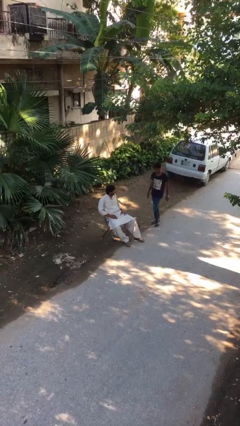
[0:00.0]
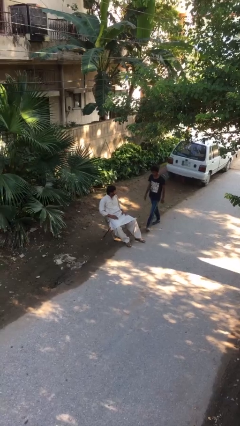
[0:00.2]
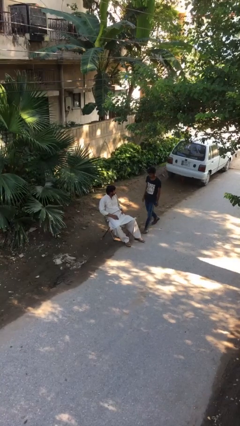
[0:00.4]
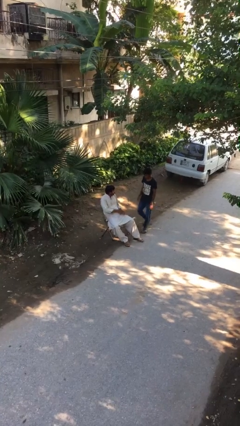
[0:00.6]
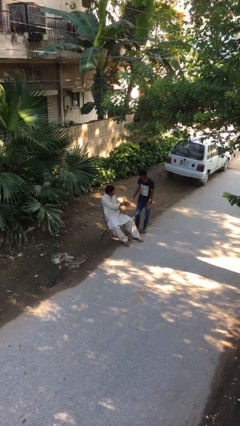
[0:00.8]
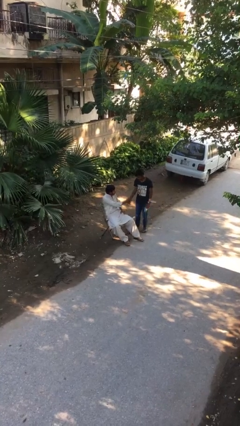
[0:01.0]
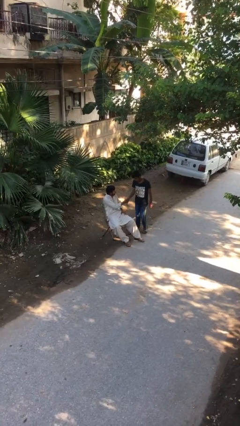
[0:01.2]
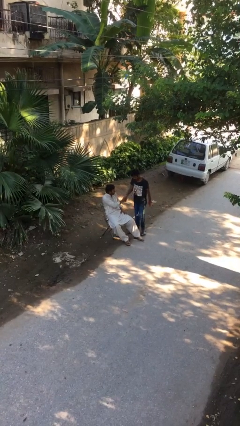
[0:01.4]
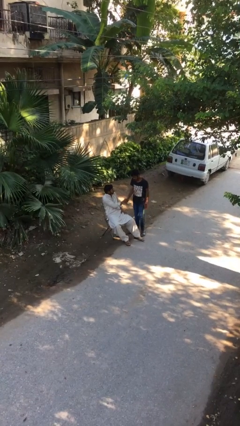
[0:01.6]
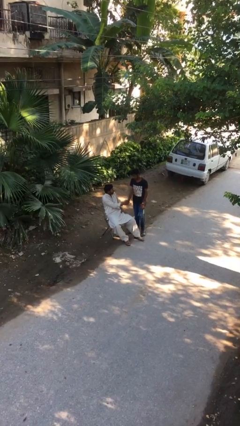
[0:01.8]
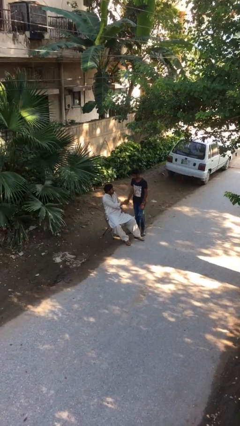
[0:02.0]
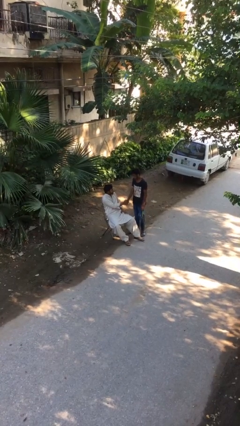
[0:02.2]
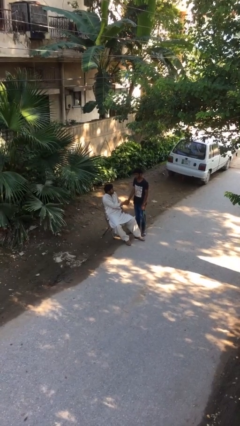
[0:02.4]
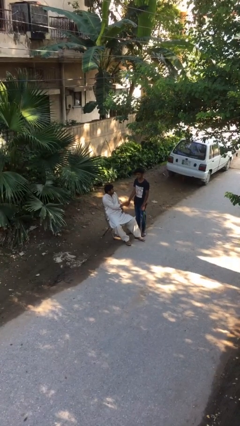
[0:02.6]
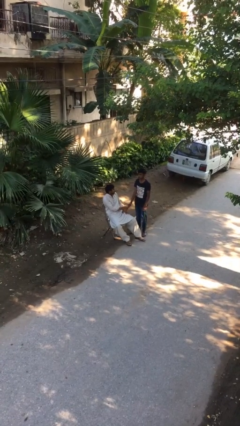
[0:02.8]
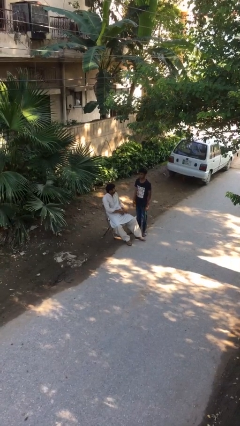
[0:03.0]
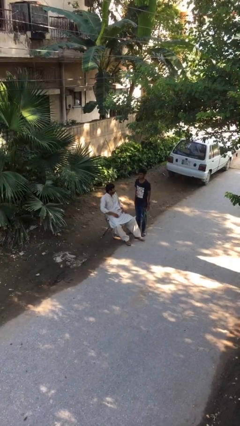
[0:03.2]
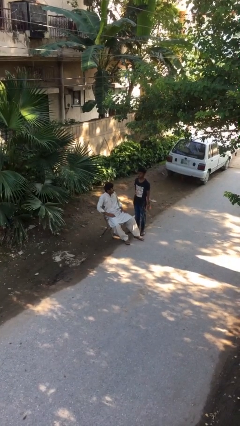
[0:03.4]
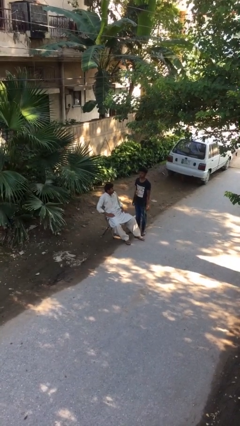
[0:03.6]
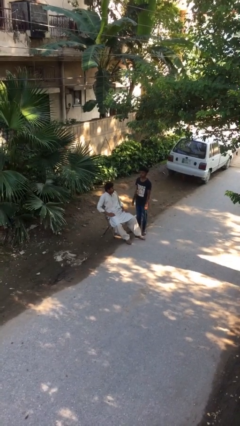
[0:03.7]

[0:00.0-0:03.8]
person shakes hand

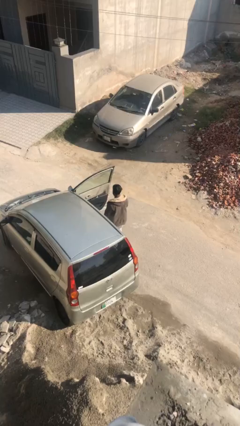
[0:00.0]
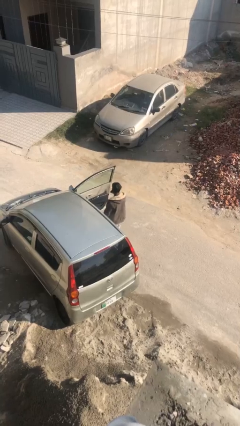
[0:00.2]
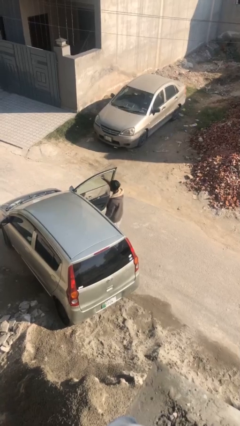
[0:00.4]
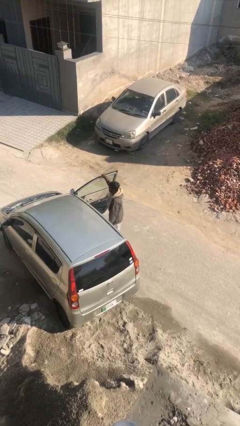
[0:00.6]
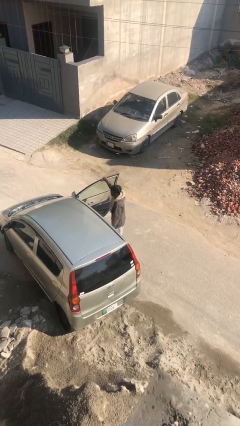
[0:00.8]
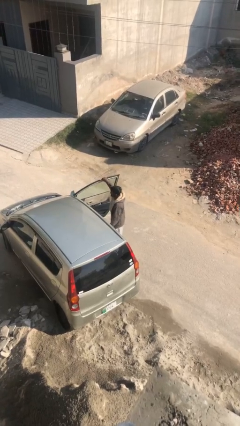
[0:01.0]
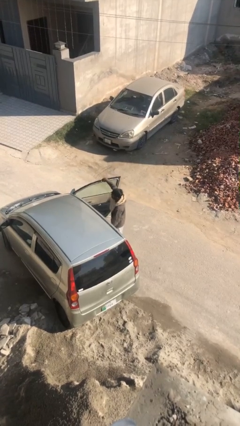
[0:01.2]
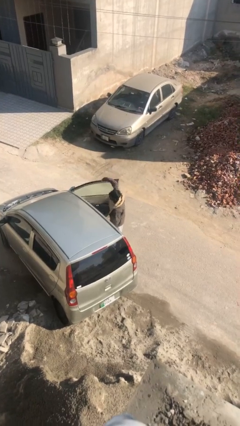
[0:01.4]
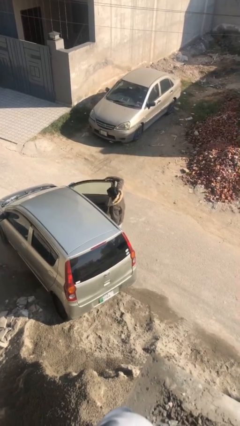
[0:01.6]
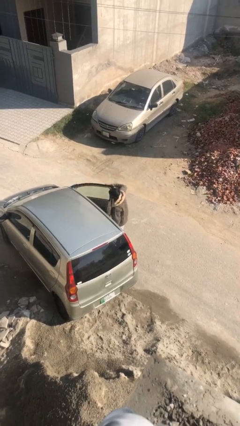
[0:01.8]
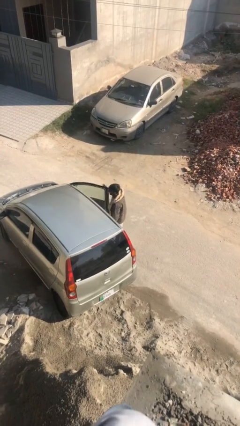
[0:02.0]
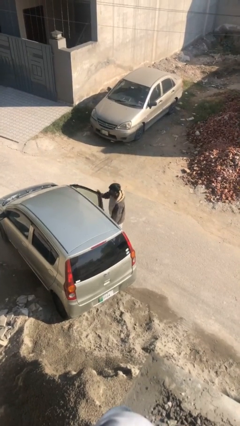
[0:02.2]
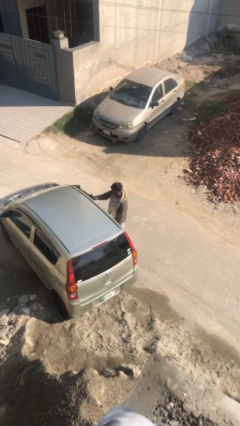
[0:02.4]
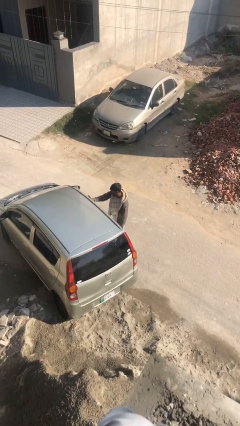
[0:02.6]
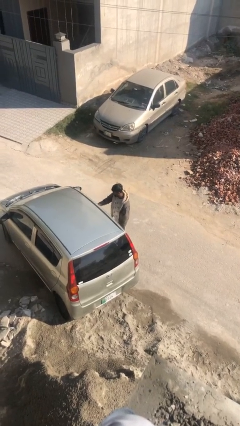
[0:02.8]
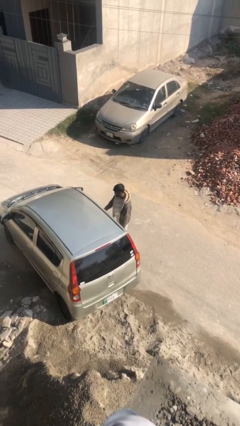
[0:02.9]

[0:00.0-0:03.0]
person closes car door

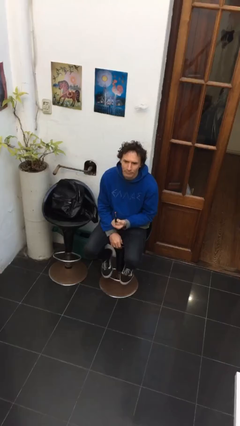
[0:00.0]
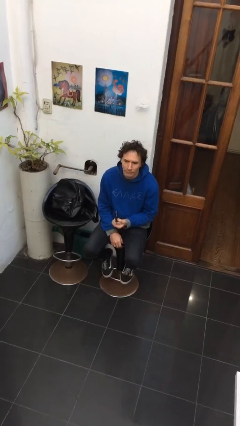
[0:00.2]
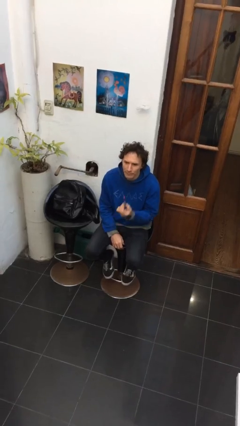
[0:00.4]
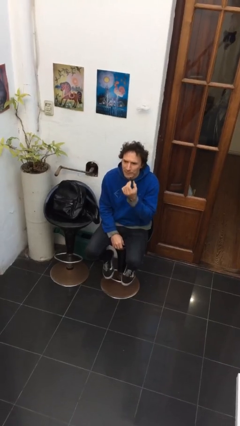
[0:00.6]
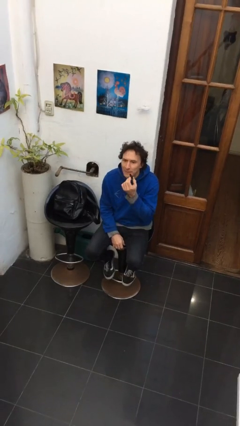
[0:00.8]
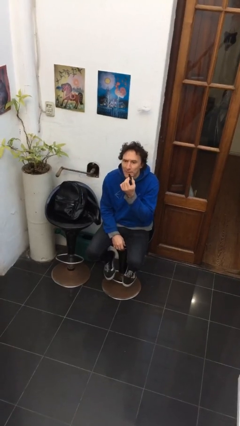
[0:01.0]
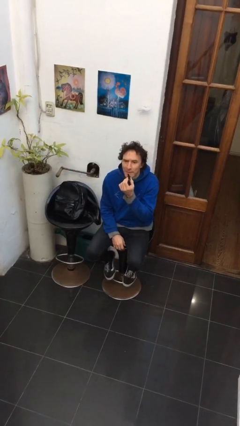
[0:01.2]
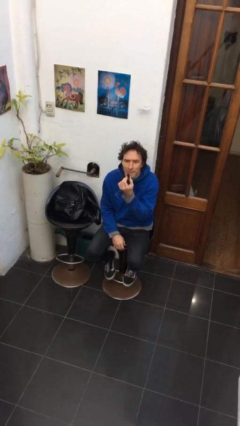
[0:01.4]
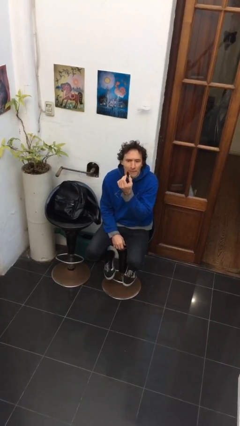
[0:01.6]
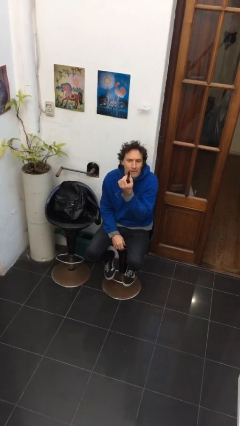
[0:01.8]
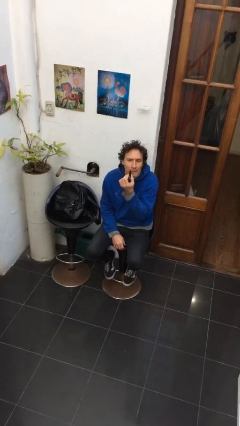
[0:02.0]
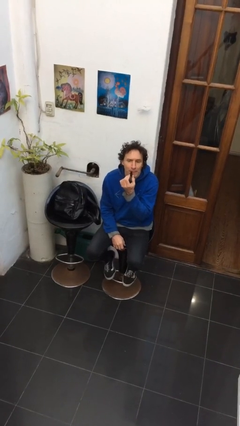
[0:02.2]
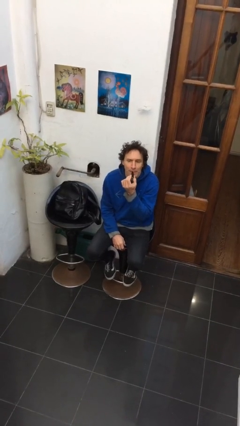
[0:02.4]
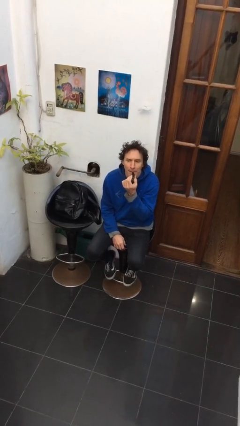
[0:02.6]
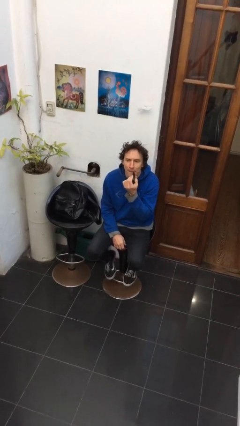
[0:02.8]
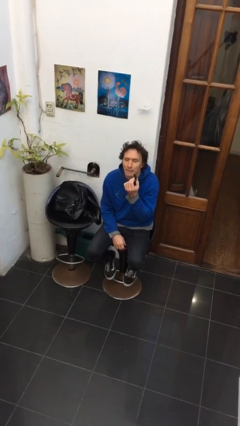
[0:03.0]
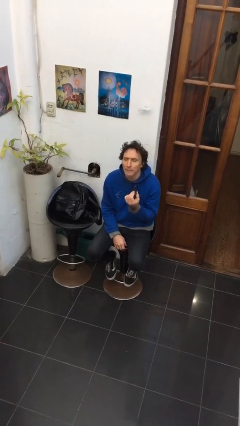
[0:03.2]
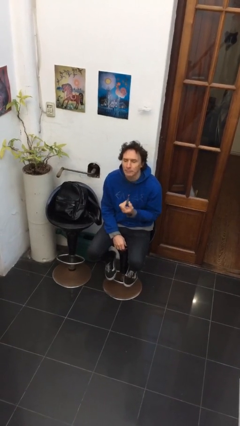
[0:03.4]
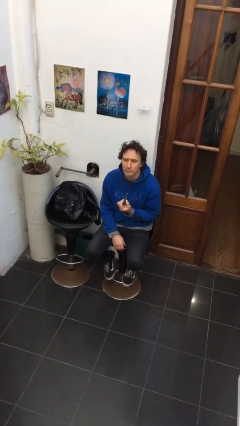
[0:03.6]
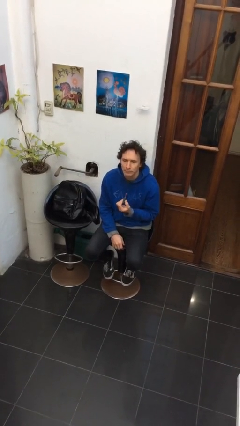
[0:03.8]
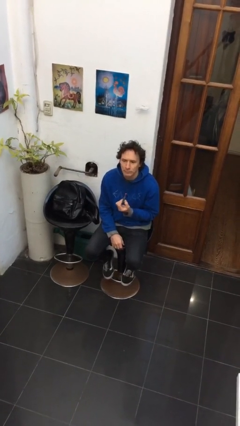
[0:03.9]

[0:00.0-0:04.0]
person applies lip makeup

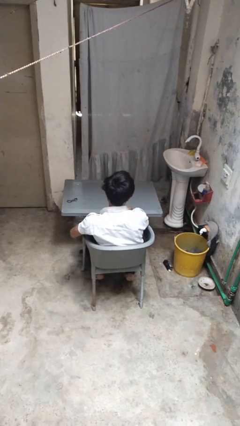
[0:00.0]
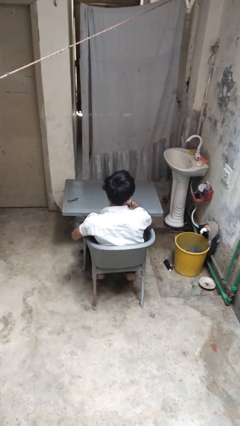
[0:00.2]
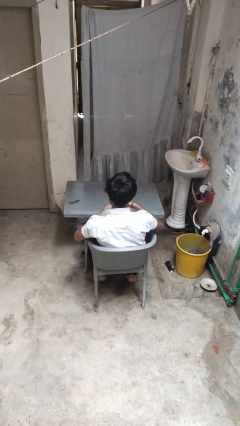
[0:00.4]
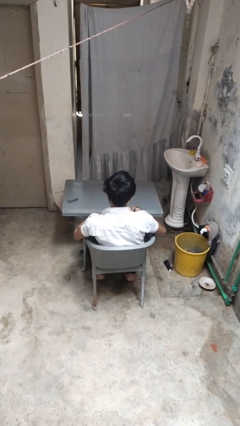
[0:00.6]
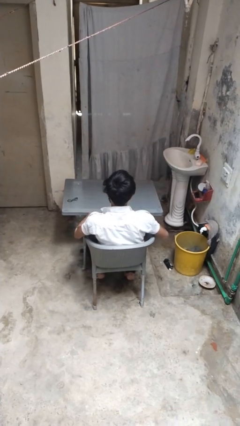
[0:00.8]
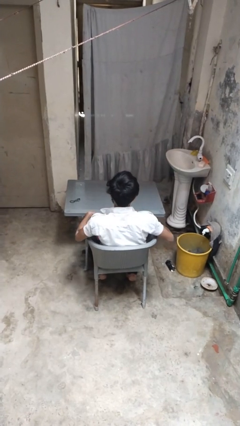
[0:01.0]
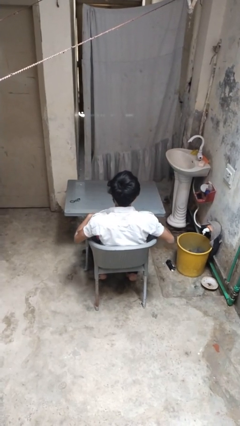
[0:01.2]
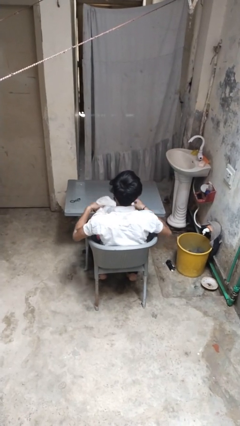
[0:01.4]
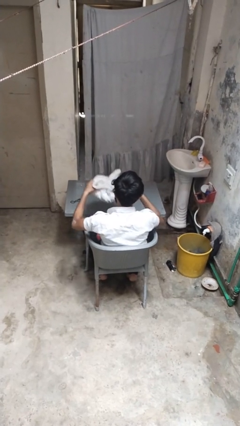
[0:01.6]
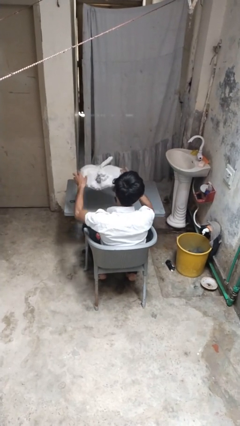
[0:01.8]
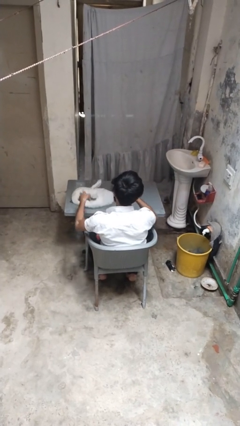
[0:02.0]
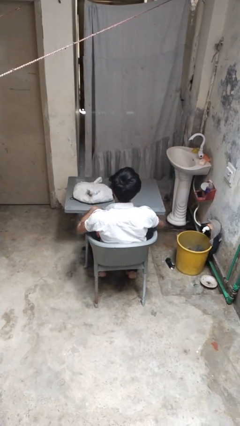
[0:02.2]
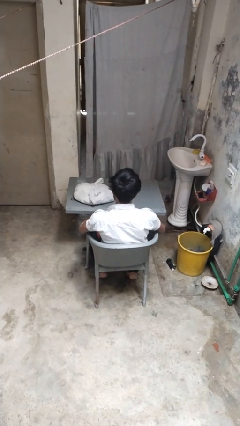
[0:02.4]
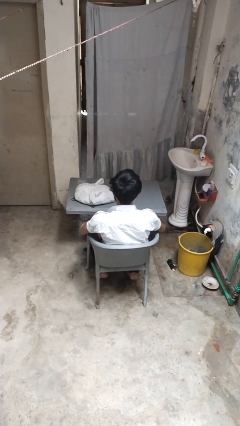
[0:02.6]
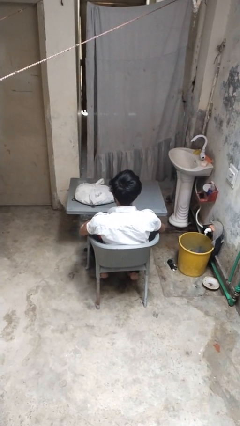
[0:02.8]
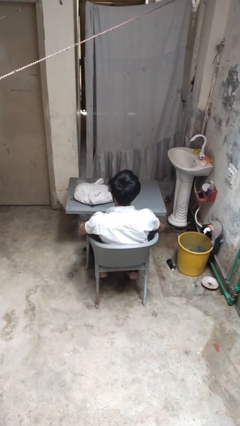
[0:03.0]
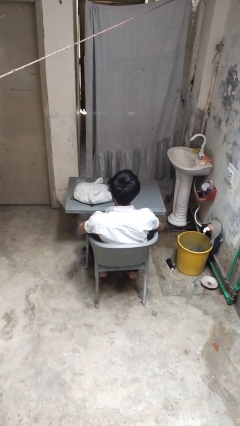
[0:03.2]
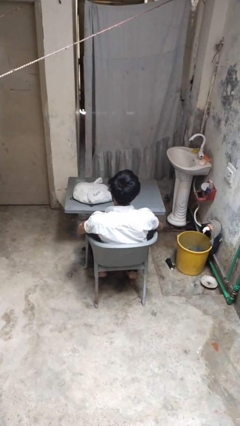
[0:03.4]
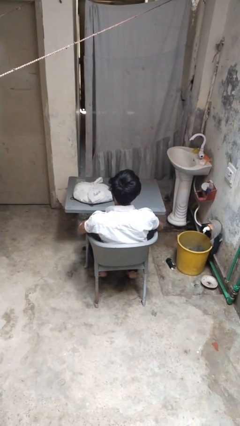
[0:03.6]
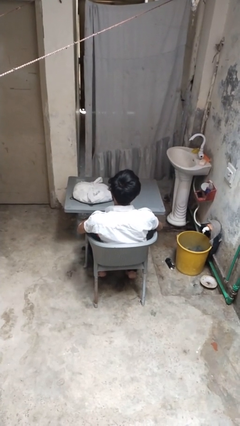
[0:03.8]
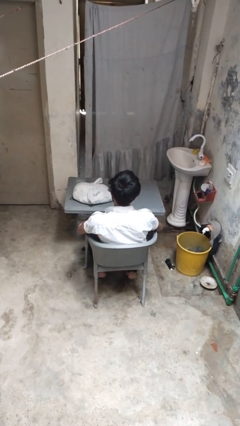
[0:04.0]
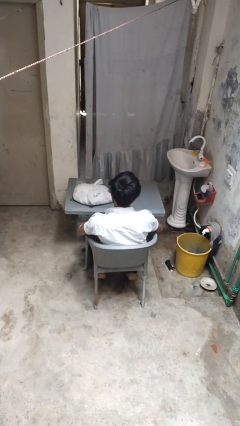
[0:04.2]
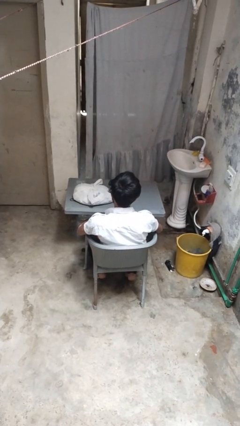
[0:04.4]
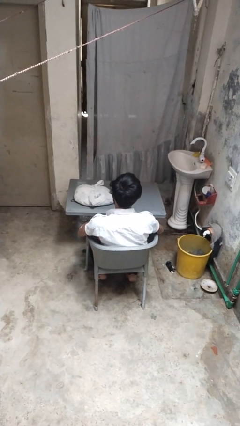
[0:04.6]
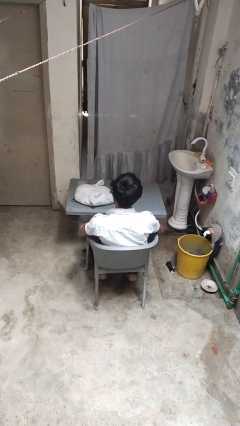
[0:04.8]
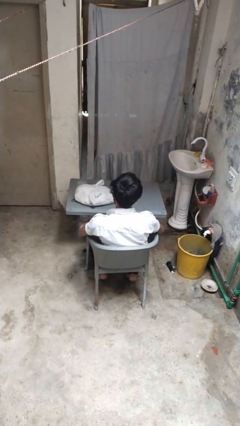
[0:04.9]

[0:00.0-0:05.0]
person throws object on table

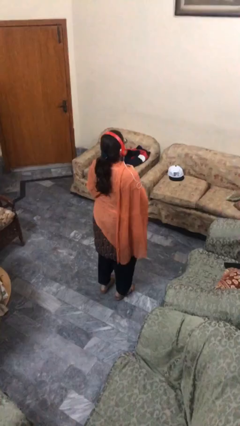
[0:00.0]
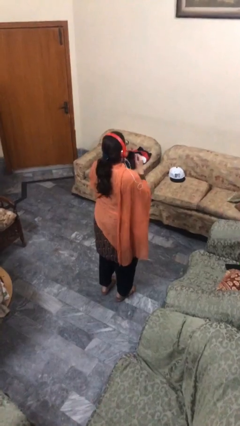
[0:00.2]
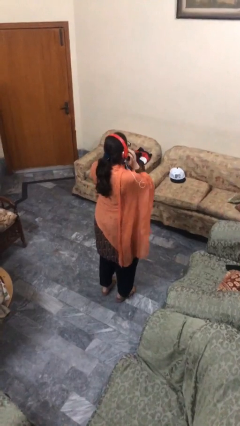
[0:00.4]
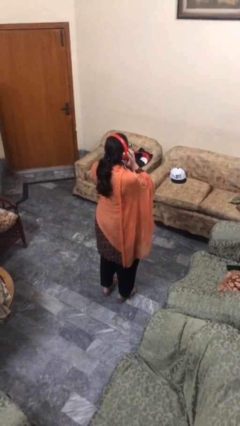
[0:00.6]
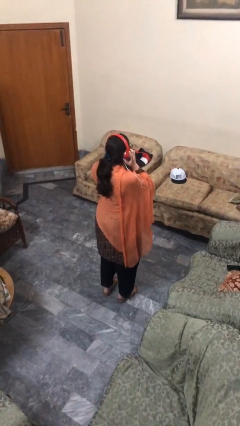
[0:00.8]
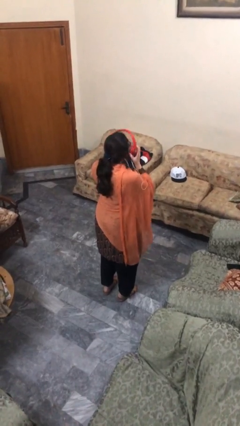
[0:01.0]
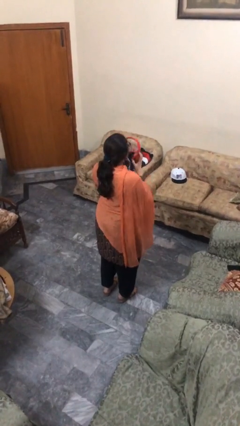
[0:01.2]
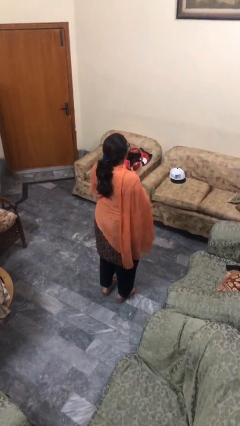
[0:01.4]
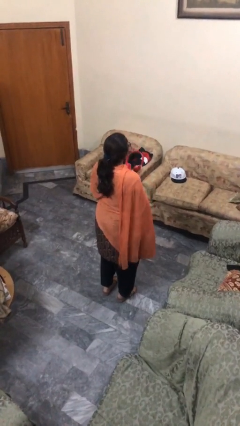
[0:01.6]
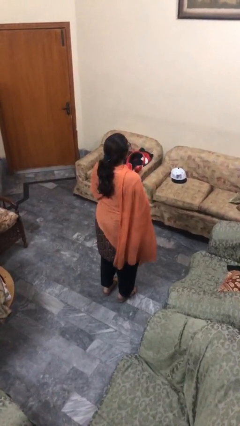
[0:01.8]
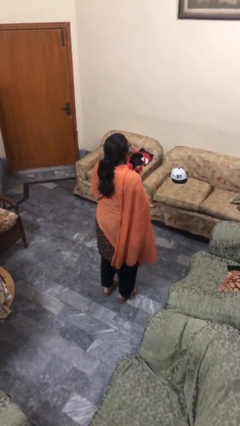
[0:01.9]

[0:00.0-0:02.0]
person takes off headphones
